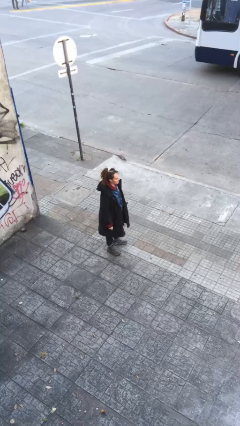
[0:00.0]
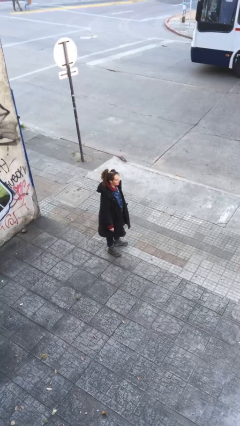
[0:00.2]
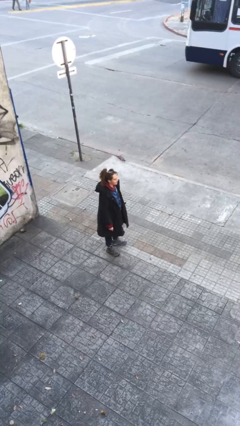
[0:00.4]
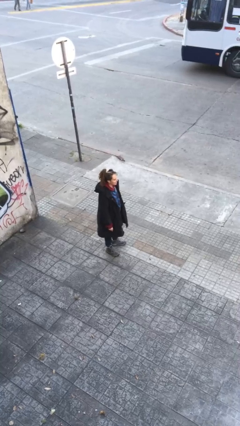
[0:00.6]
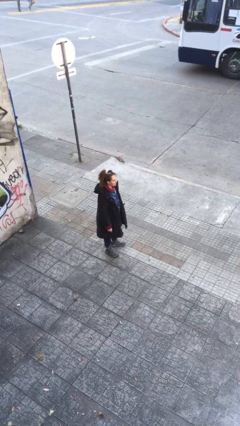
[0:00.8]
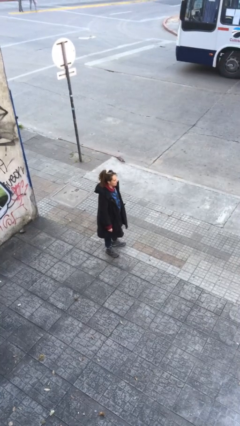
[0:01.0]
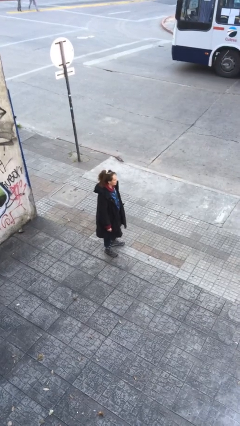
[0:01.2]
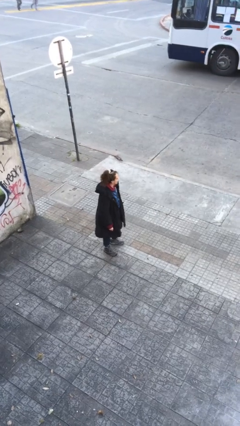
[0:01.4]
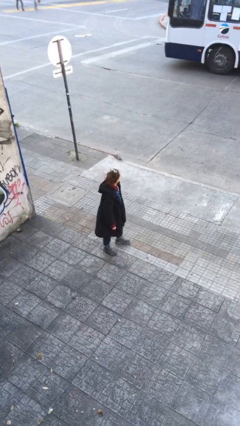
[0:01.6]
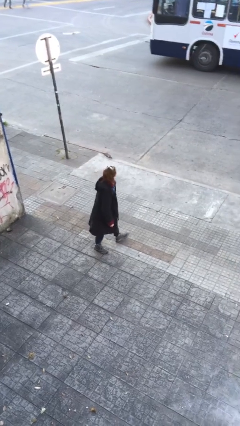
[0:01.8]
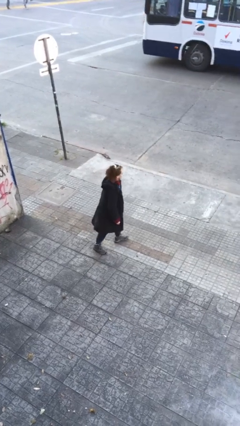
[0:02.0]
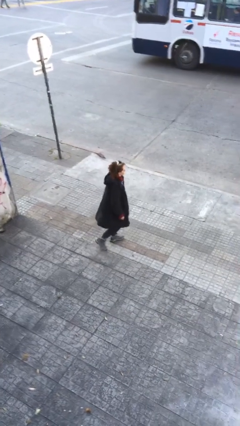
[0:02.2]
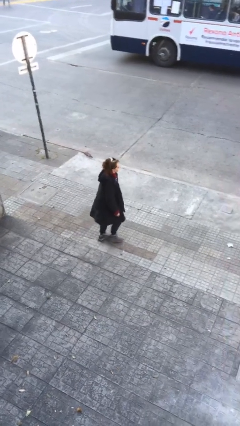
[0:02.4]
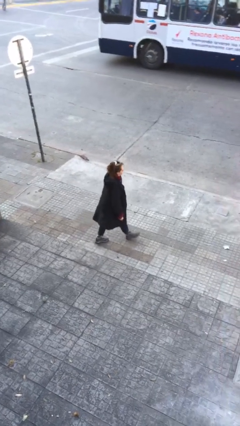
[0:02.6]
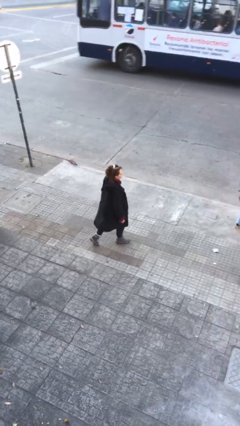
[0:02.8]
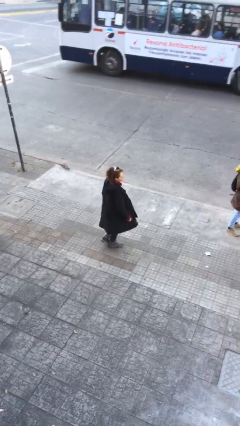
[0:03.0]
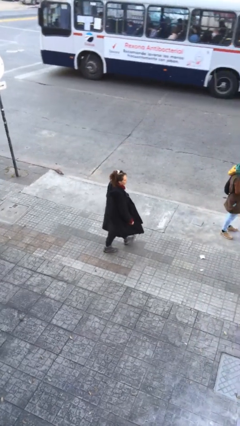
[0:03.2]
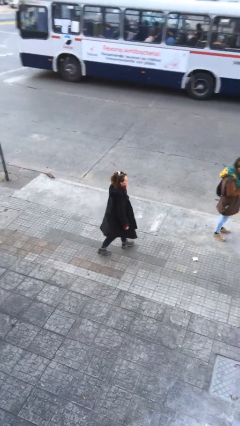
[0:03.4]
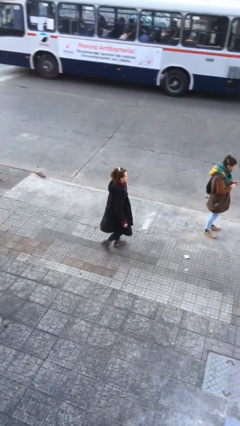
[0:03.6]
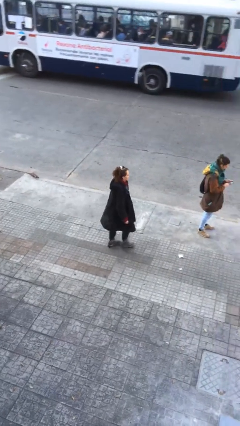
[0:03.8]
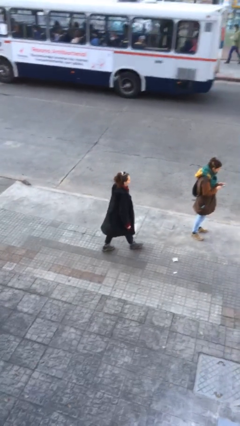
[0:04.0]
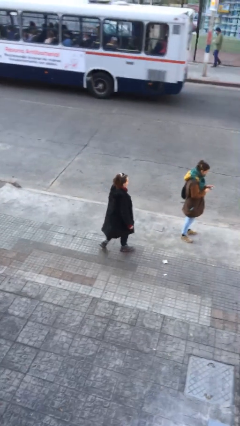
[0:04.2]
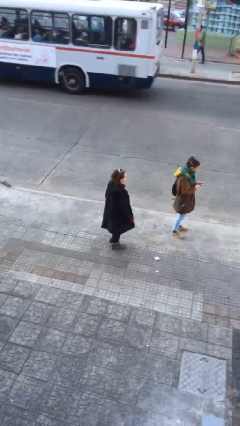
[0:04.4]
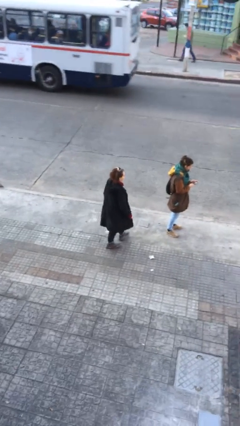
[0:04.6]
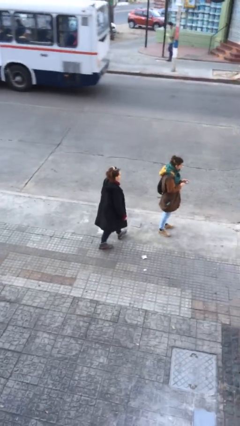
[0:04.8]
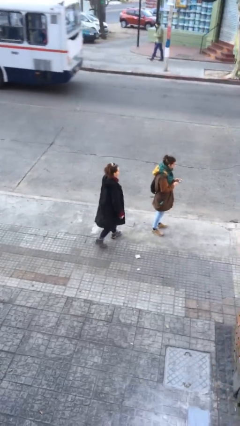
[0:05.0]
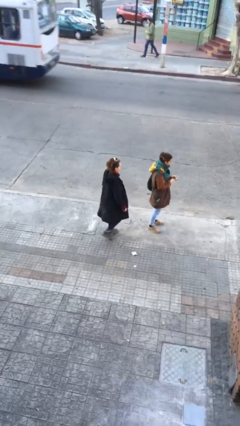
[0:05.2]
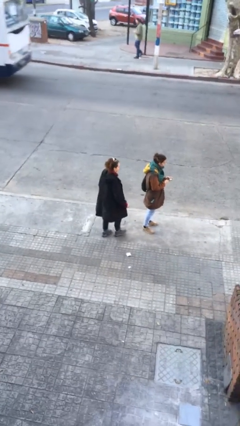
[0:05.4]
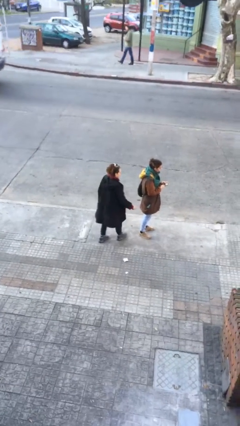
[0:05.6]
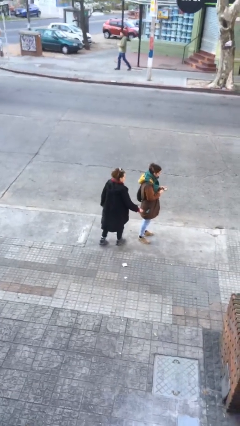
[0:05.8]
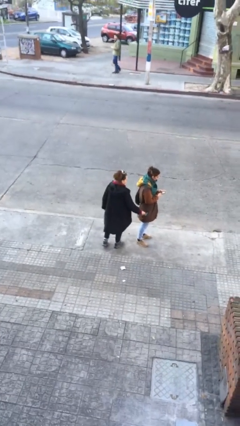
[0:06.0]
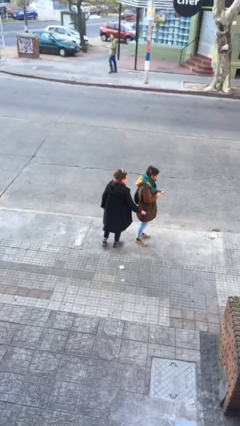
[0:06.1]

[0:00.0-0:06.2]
person steals object from person

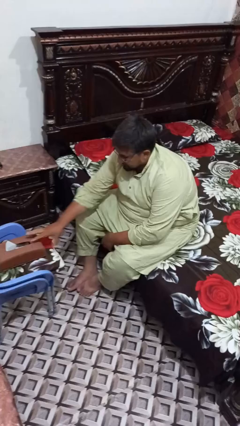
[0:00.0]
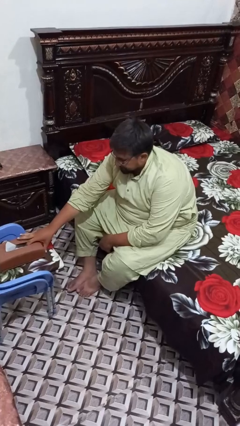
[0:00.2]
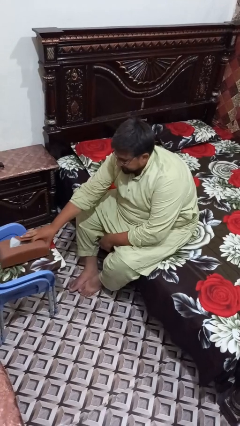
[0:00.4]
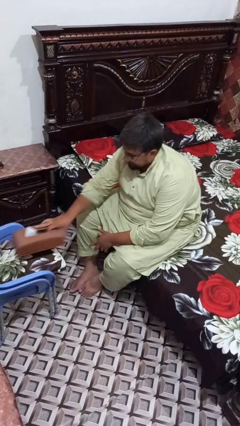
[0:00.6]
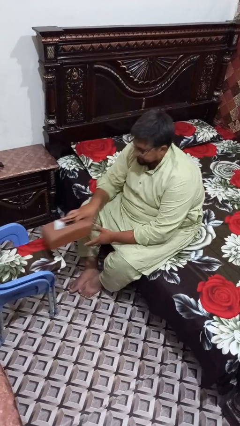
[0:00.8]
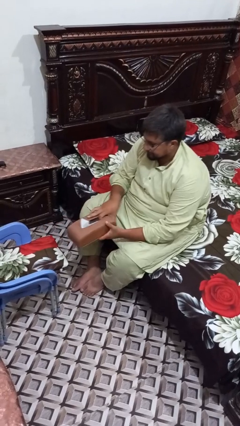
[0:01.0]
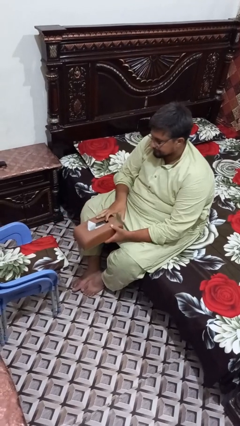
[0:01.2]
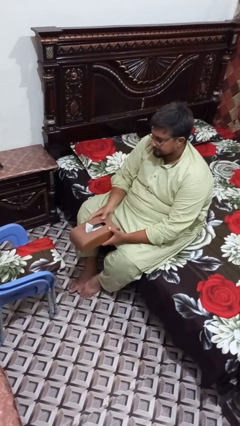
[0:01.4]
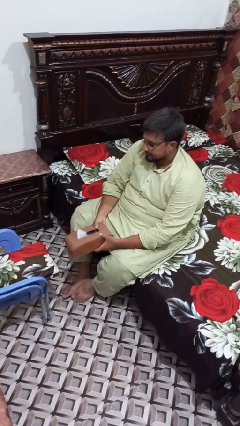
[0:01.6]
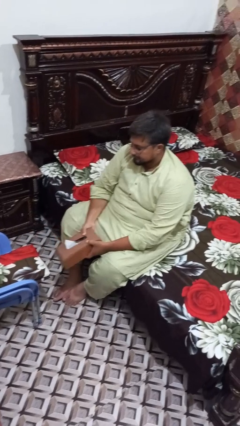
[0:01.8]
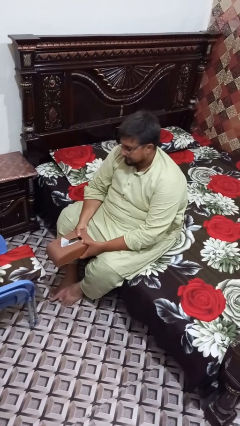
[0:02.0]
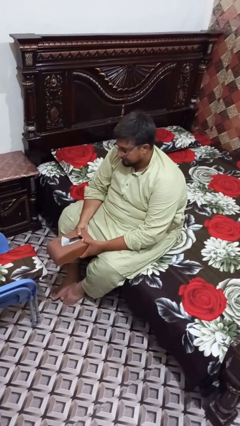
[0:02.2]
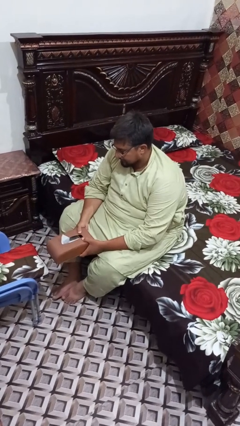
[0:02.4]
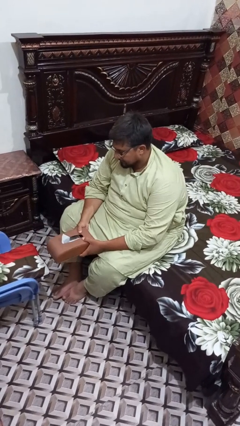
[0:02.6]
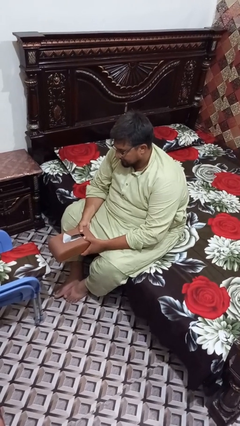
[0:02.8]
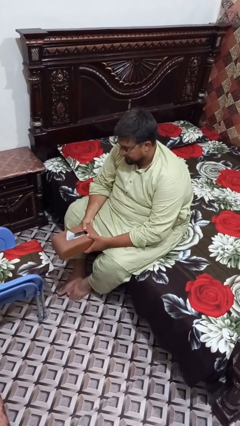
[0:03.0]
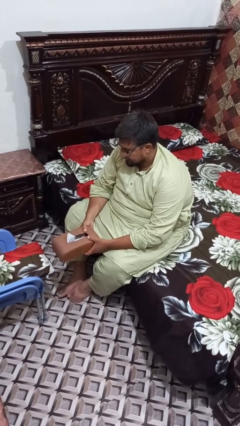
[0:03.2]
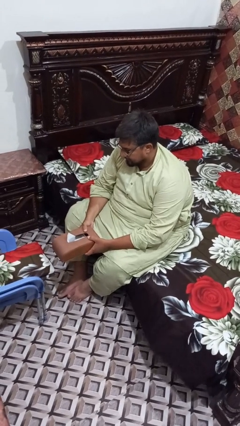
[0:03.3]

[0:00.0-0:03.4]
person picks up object from couch

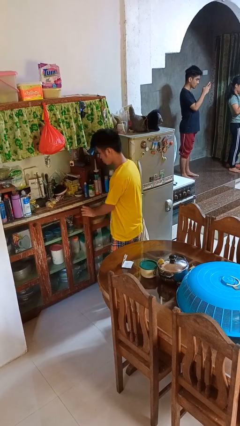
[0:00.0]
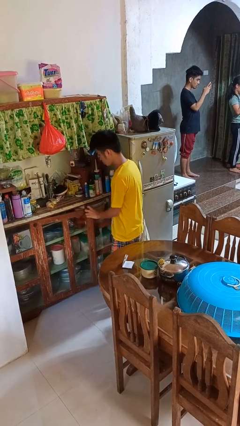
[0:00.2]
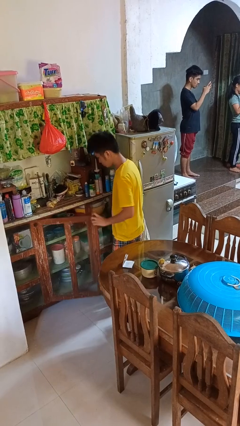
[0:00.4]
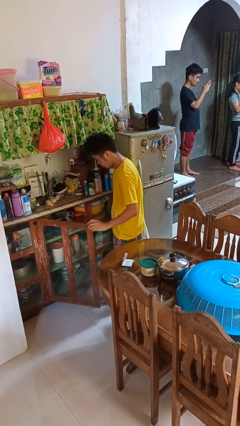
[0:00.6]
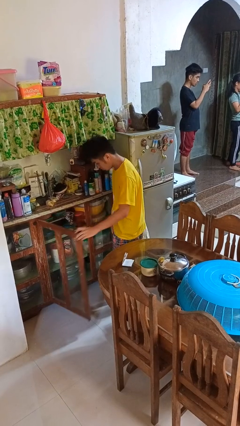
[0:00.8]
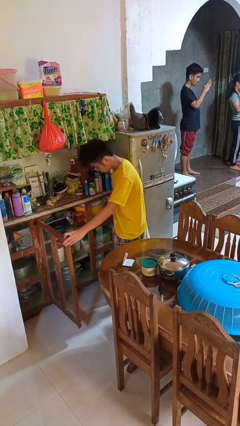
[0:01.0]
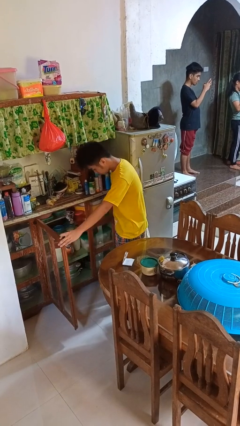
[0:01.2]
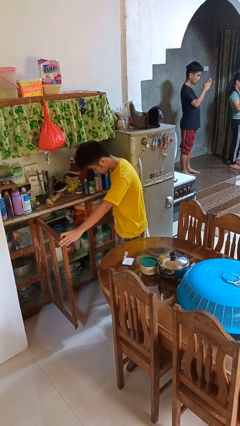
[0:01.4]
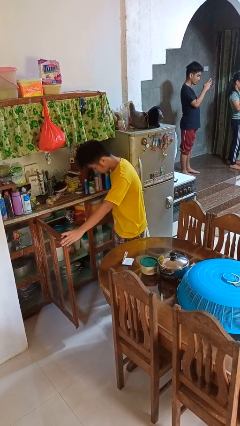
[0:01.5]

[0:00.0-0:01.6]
person opens cabinet

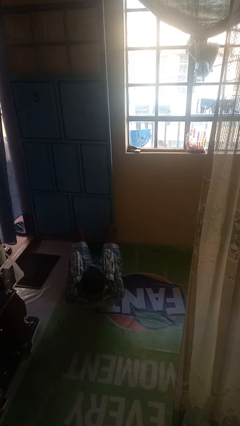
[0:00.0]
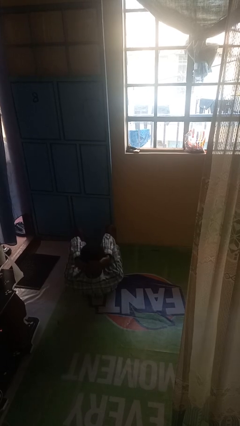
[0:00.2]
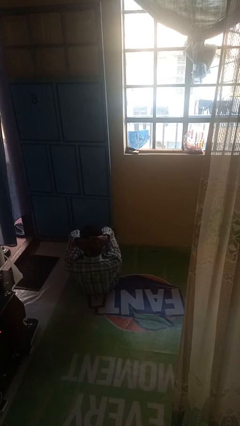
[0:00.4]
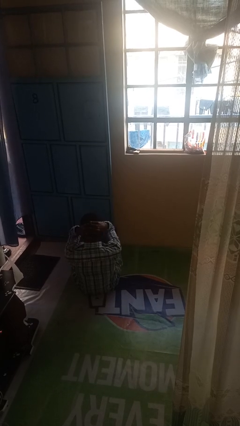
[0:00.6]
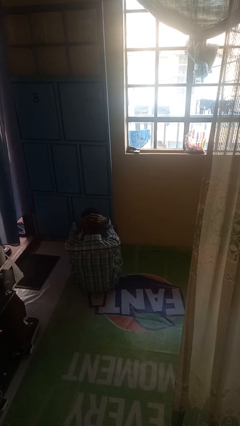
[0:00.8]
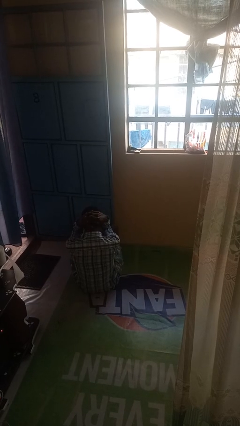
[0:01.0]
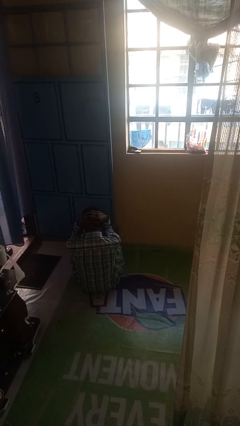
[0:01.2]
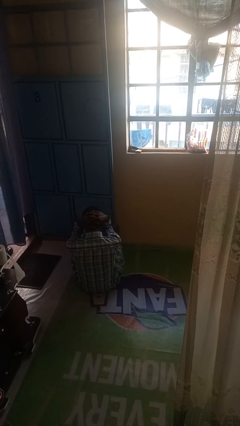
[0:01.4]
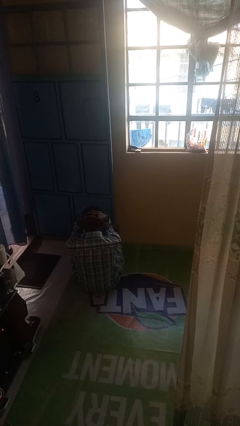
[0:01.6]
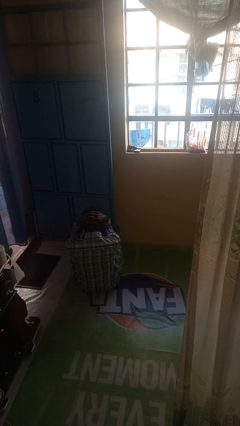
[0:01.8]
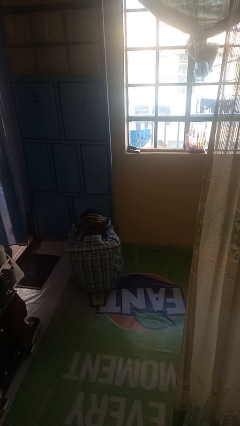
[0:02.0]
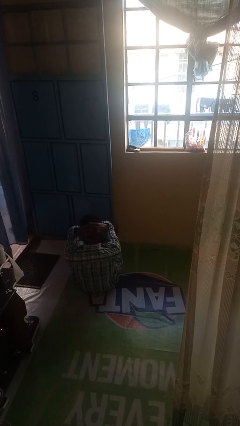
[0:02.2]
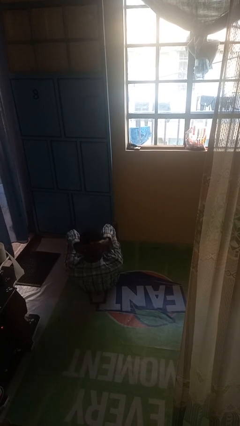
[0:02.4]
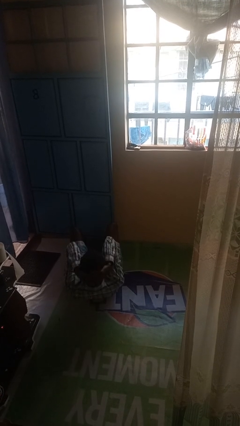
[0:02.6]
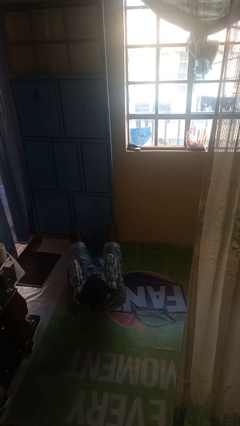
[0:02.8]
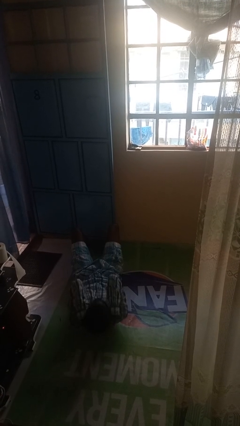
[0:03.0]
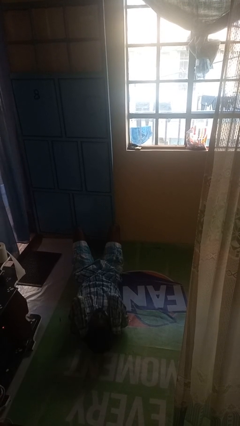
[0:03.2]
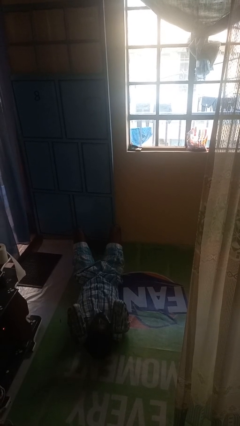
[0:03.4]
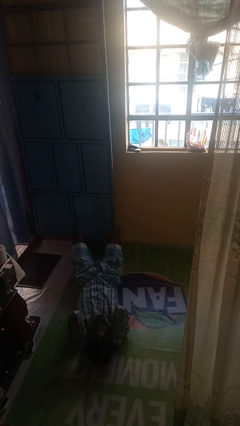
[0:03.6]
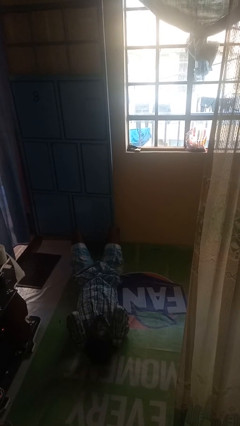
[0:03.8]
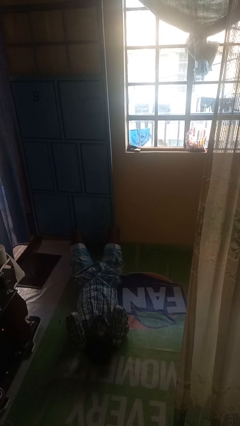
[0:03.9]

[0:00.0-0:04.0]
person exercises with situp

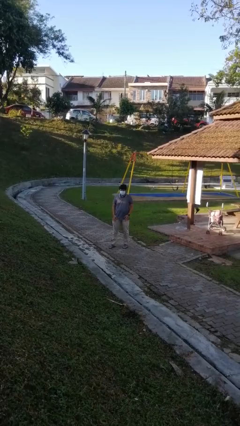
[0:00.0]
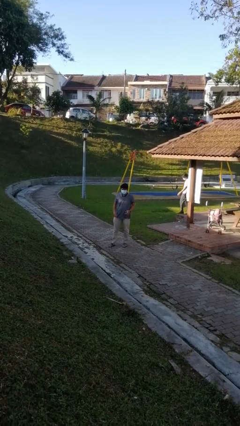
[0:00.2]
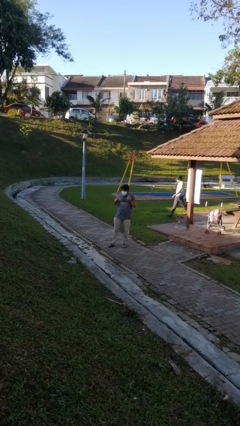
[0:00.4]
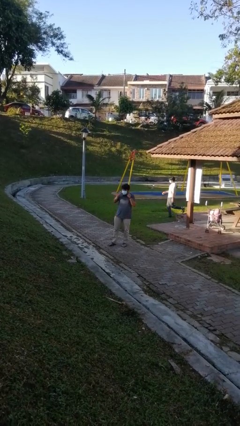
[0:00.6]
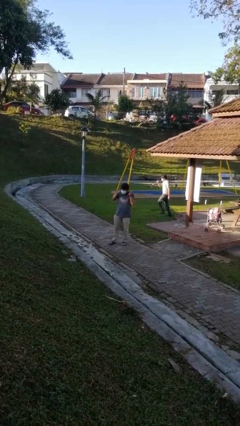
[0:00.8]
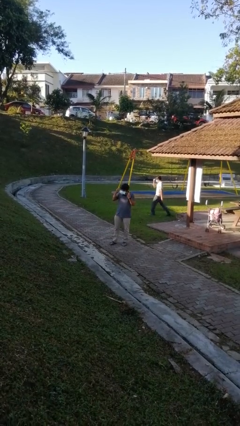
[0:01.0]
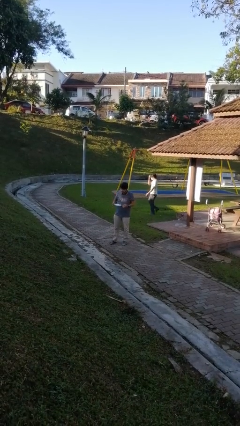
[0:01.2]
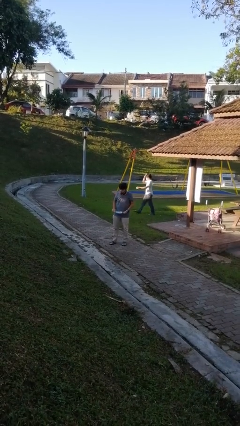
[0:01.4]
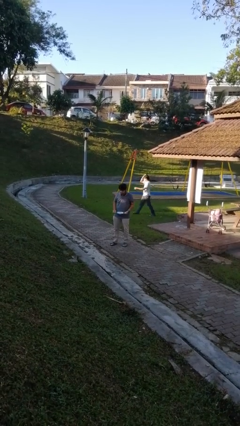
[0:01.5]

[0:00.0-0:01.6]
person takes off facemask

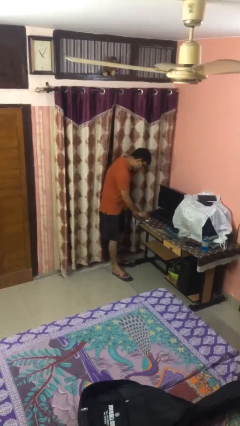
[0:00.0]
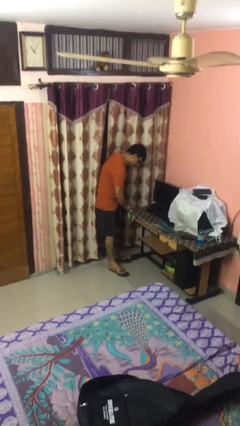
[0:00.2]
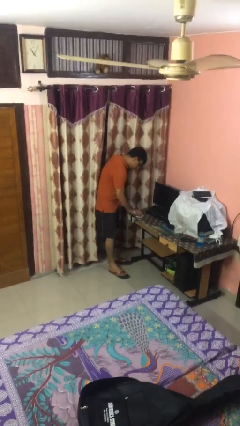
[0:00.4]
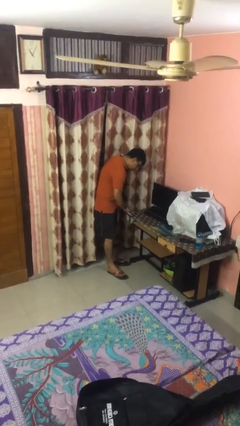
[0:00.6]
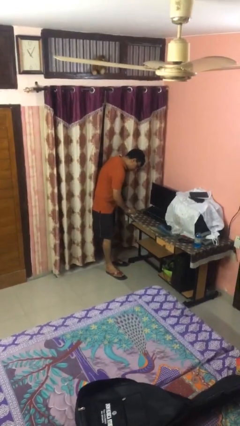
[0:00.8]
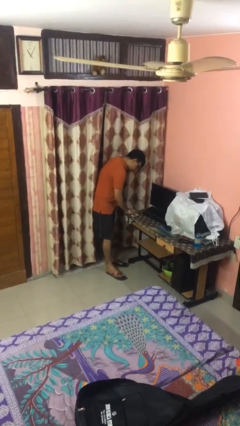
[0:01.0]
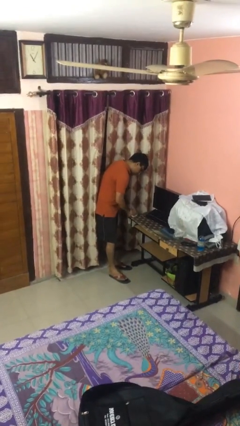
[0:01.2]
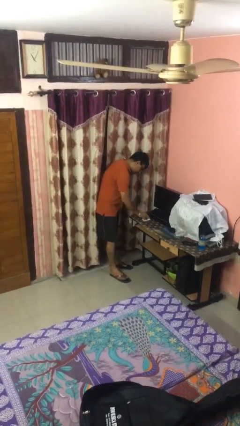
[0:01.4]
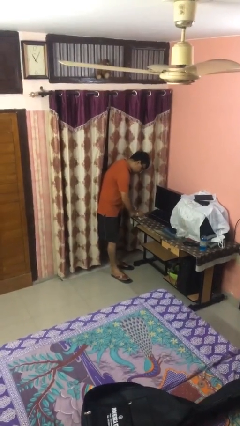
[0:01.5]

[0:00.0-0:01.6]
person cleans table with rag
